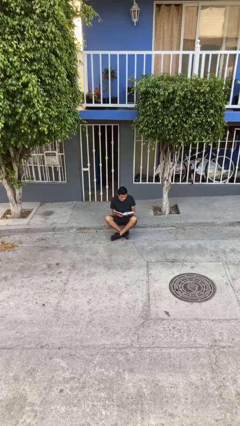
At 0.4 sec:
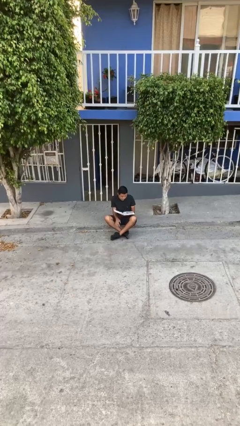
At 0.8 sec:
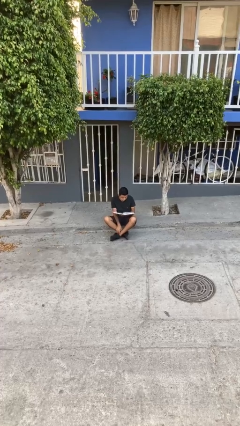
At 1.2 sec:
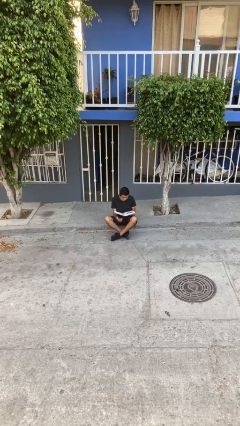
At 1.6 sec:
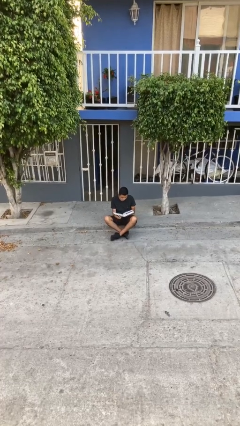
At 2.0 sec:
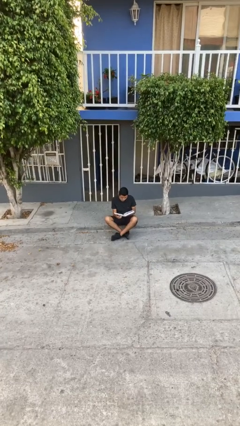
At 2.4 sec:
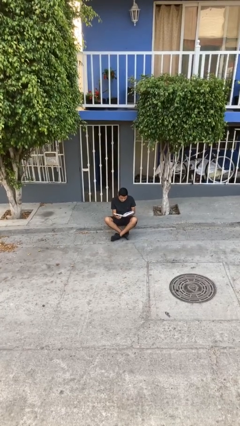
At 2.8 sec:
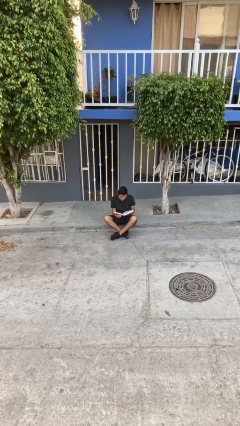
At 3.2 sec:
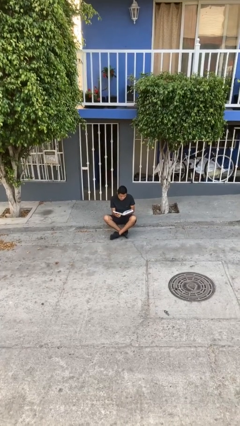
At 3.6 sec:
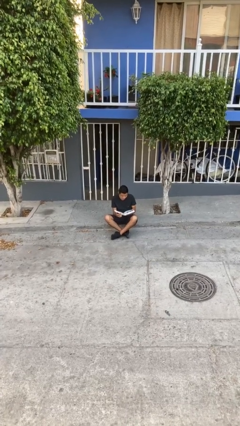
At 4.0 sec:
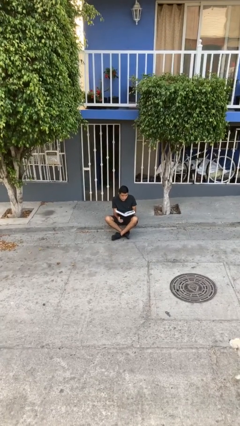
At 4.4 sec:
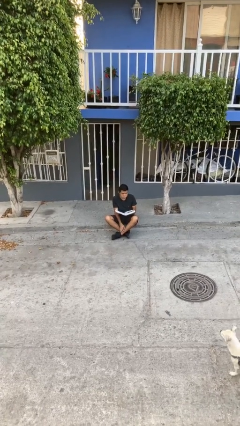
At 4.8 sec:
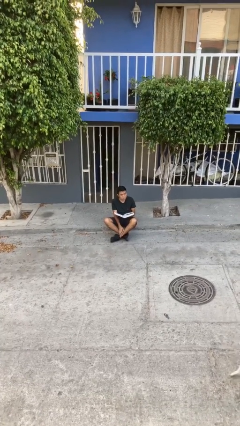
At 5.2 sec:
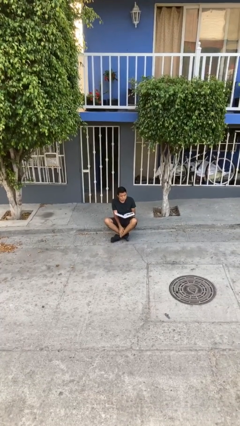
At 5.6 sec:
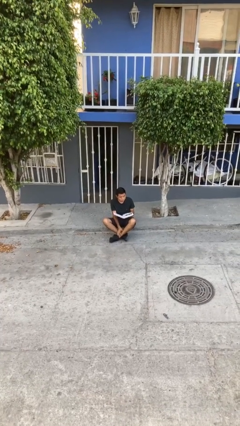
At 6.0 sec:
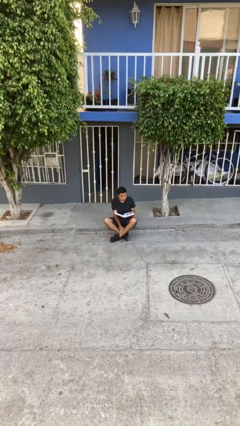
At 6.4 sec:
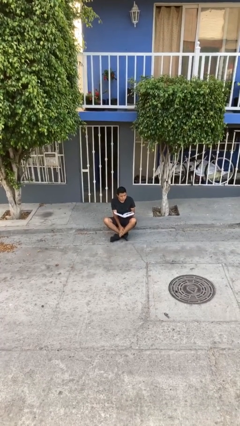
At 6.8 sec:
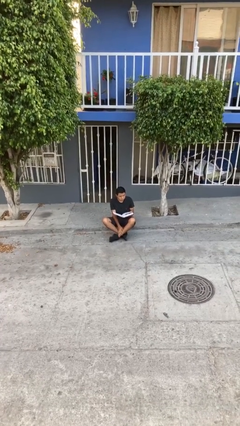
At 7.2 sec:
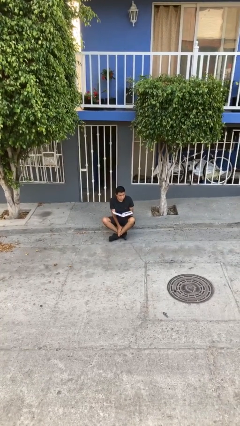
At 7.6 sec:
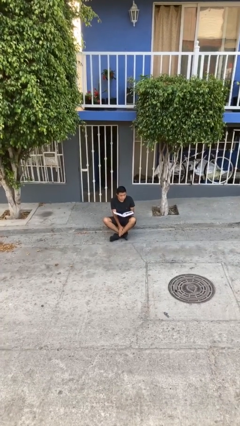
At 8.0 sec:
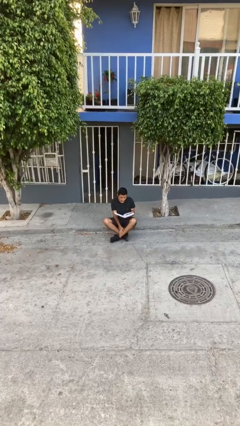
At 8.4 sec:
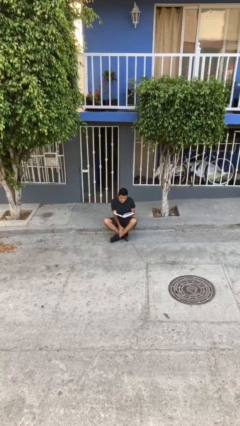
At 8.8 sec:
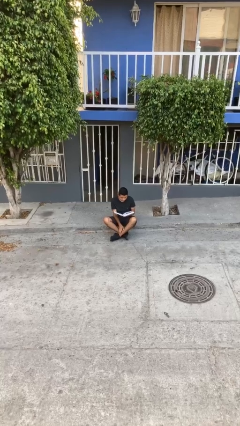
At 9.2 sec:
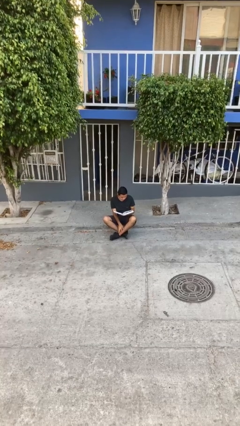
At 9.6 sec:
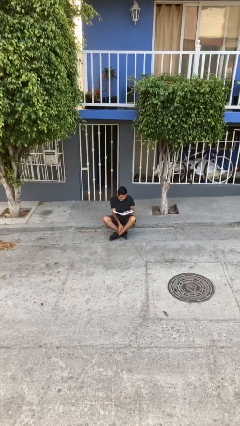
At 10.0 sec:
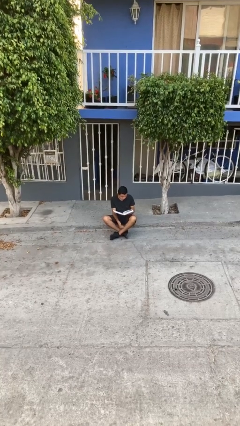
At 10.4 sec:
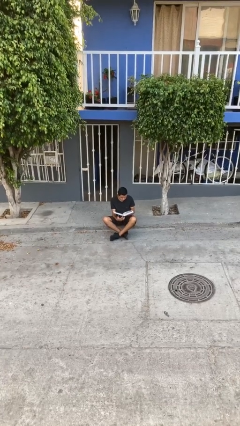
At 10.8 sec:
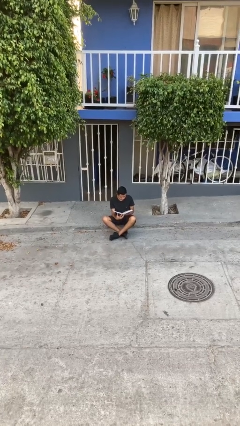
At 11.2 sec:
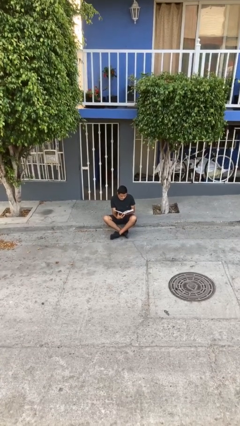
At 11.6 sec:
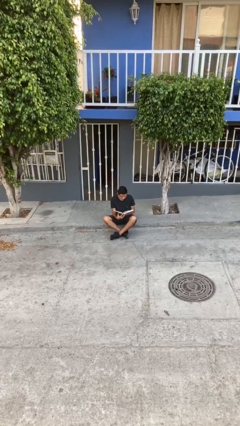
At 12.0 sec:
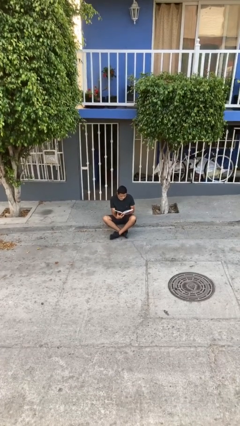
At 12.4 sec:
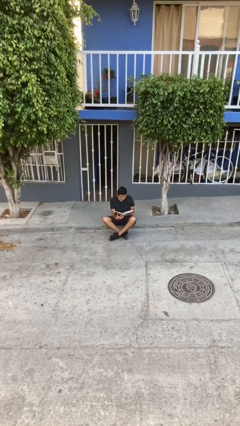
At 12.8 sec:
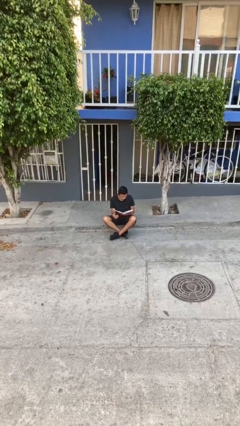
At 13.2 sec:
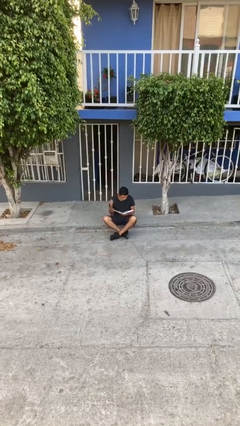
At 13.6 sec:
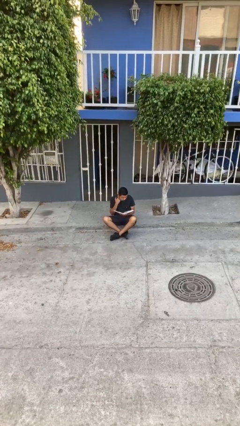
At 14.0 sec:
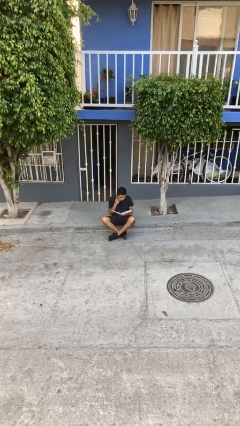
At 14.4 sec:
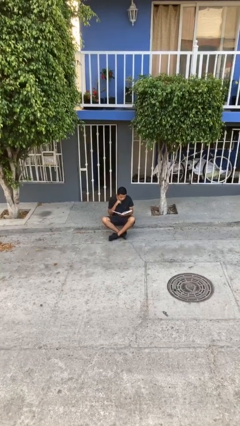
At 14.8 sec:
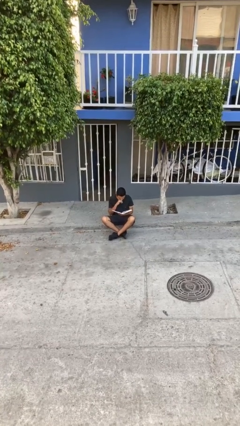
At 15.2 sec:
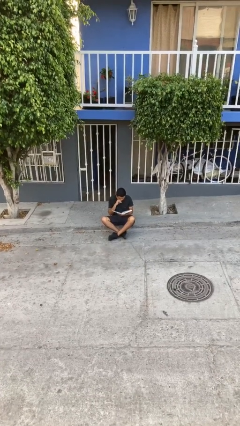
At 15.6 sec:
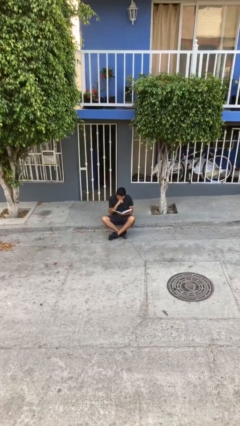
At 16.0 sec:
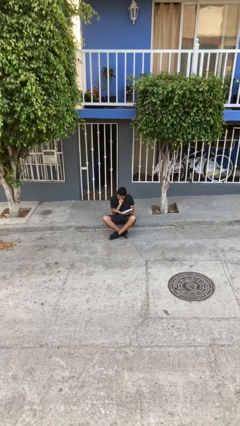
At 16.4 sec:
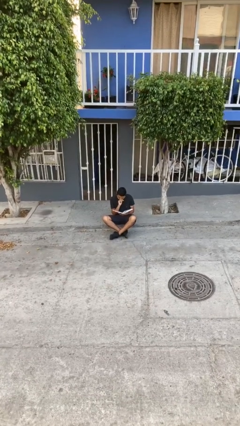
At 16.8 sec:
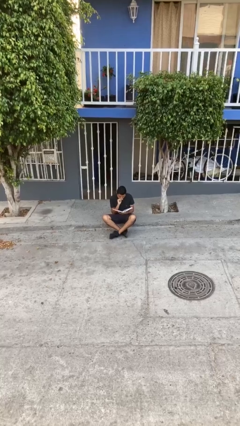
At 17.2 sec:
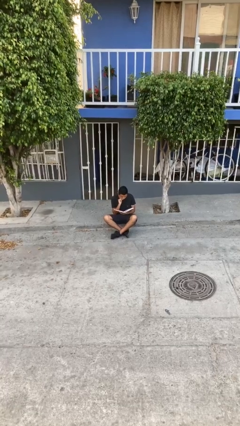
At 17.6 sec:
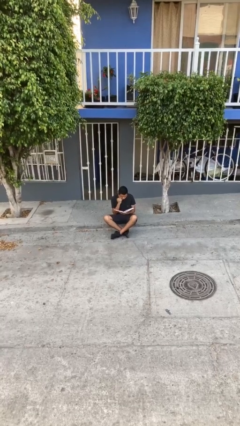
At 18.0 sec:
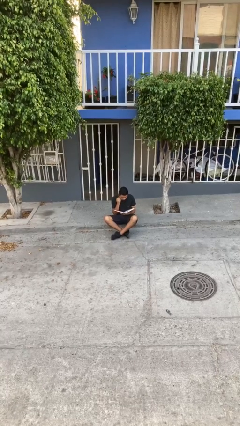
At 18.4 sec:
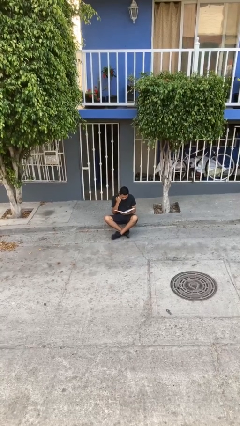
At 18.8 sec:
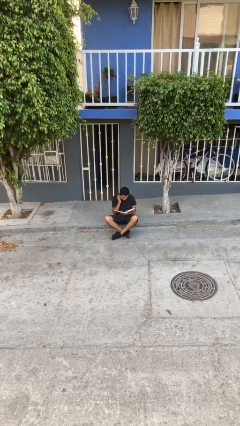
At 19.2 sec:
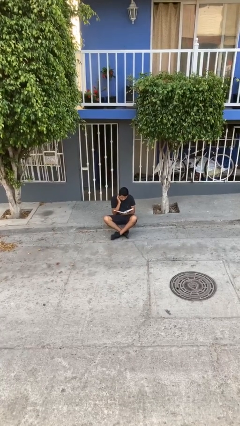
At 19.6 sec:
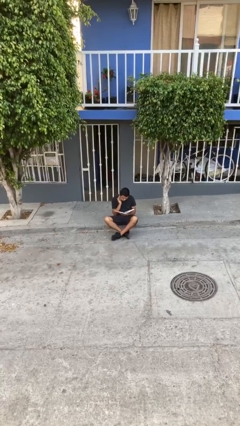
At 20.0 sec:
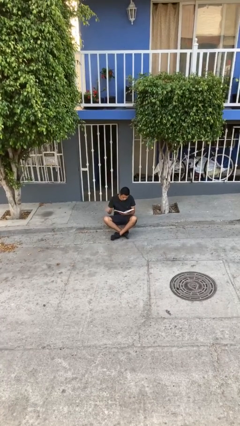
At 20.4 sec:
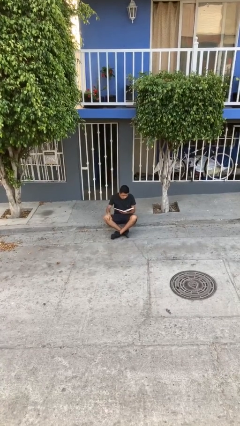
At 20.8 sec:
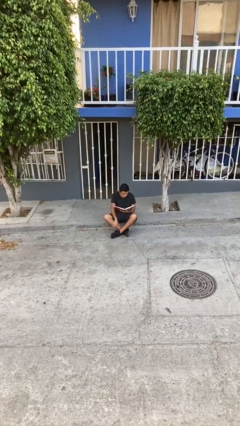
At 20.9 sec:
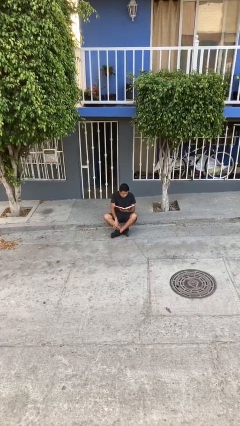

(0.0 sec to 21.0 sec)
person reads document

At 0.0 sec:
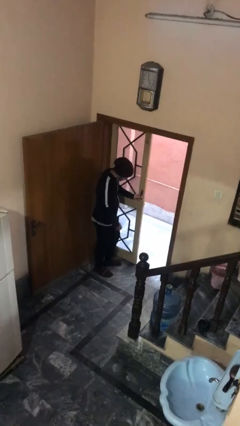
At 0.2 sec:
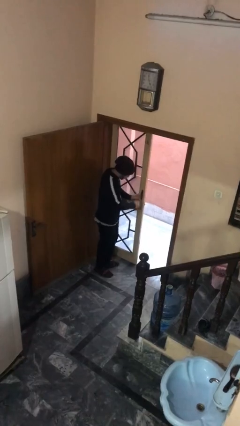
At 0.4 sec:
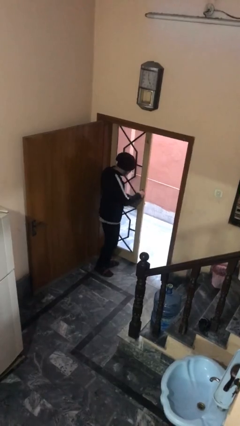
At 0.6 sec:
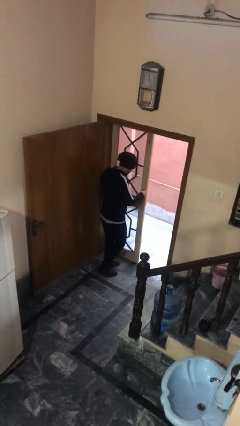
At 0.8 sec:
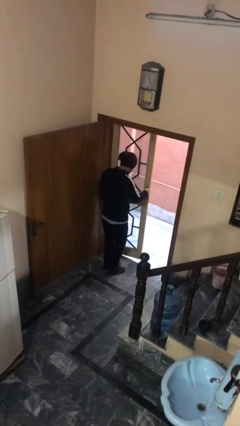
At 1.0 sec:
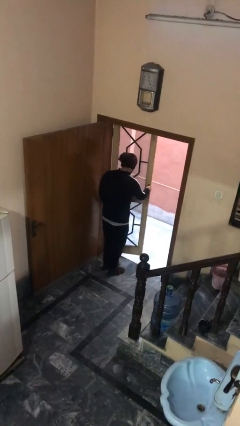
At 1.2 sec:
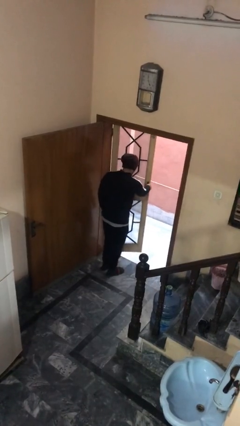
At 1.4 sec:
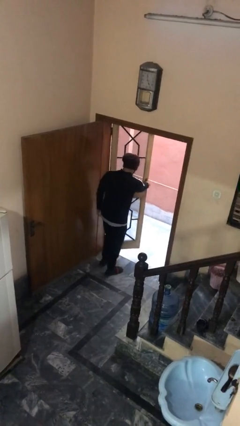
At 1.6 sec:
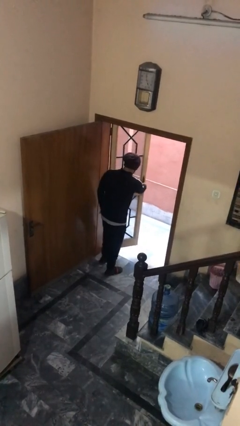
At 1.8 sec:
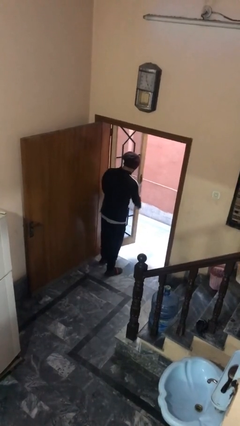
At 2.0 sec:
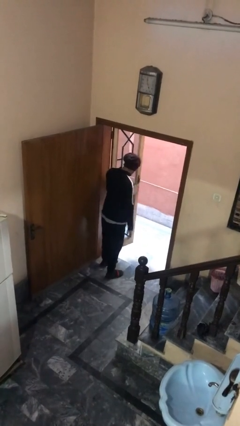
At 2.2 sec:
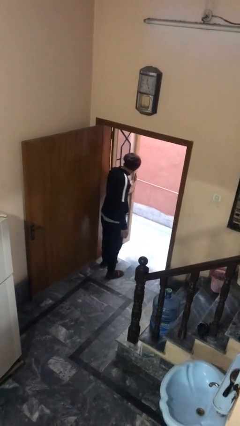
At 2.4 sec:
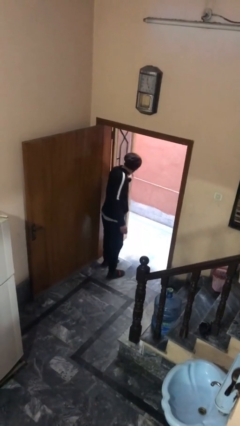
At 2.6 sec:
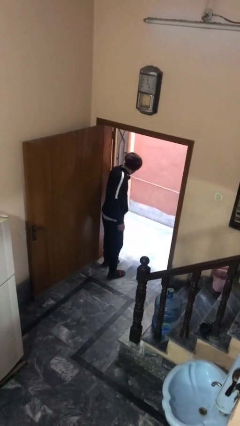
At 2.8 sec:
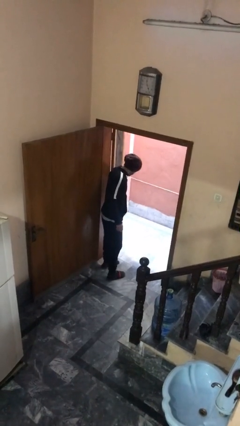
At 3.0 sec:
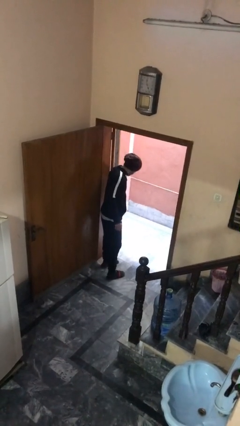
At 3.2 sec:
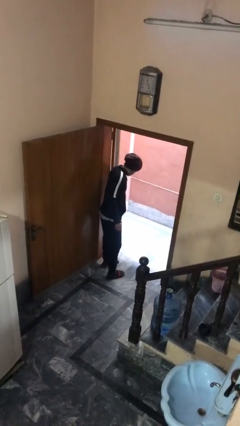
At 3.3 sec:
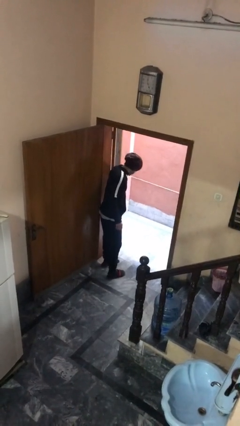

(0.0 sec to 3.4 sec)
person opens facility door

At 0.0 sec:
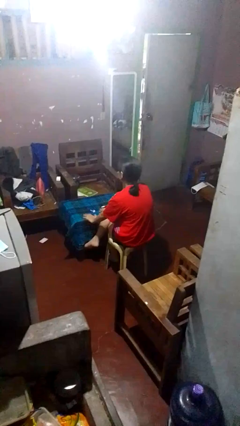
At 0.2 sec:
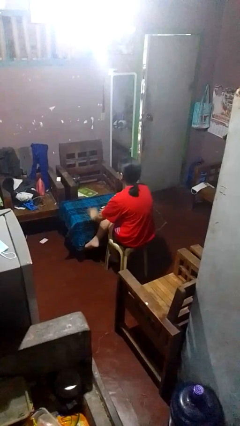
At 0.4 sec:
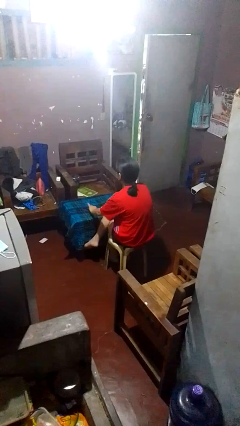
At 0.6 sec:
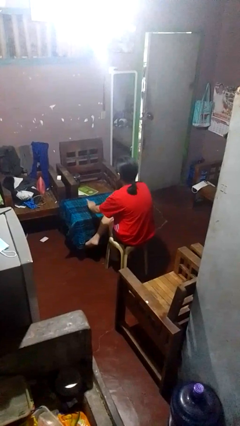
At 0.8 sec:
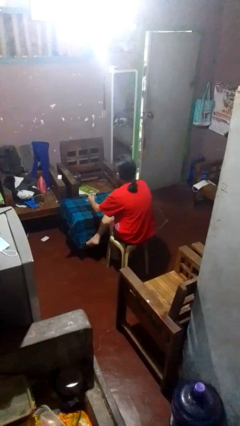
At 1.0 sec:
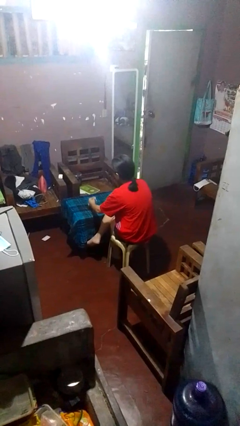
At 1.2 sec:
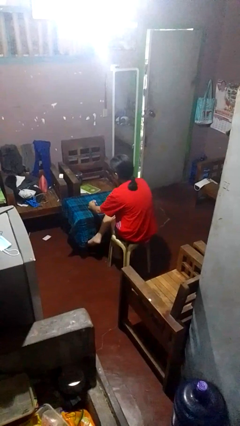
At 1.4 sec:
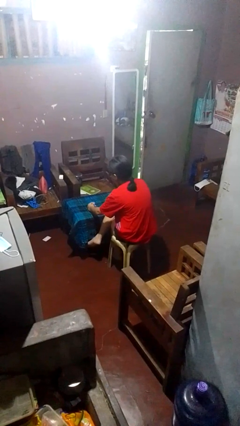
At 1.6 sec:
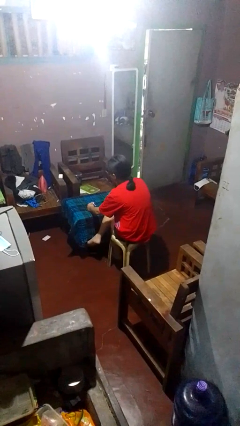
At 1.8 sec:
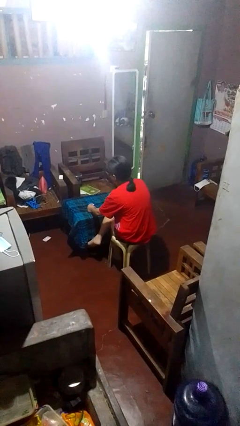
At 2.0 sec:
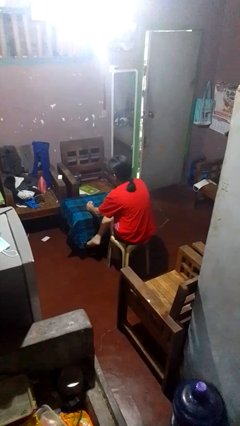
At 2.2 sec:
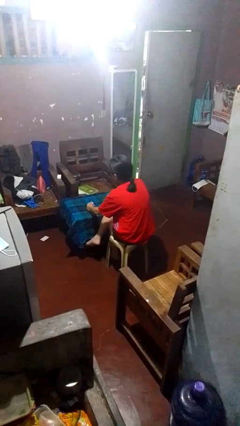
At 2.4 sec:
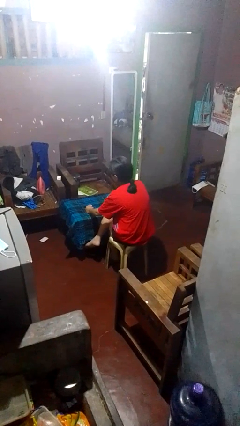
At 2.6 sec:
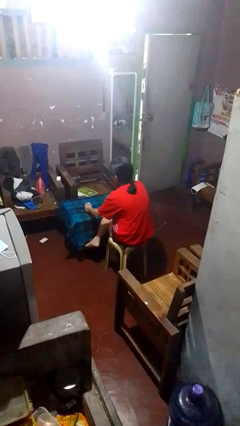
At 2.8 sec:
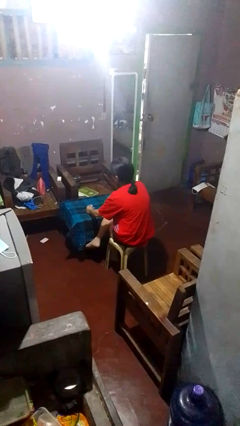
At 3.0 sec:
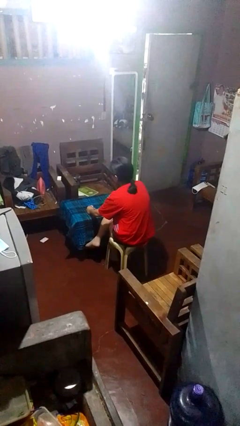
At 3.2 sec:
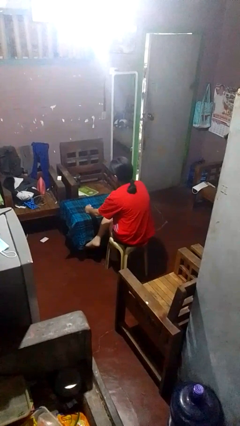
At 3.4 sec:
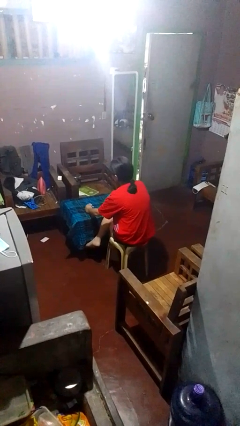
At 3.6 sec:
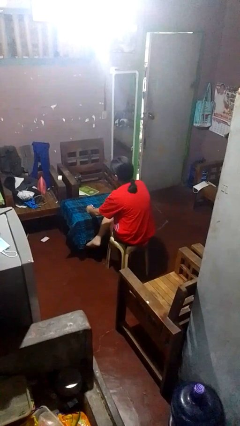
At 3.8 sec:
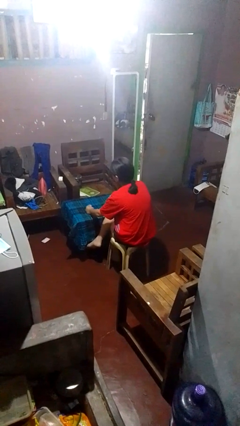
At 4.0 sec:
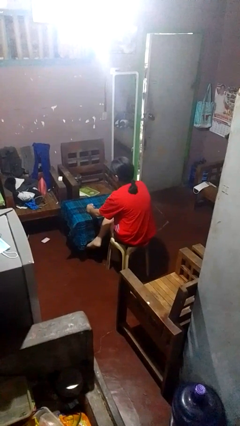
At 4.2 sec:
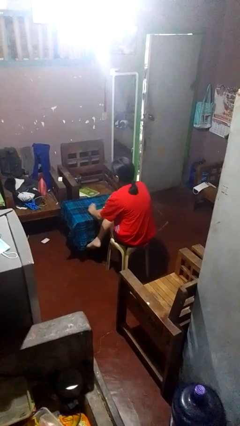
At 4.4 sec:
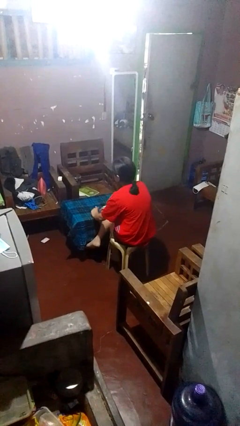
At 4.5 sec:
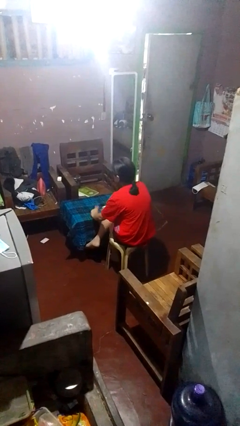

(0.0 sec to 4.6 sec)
person paints fingernails
